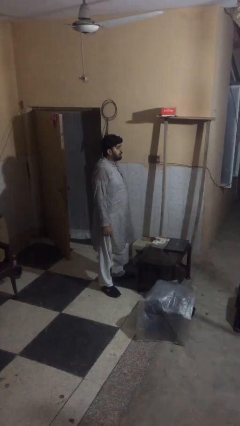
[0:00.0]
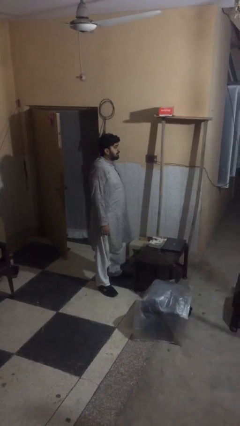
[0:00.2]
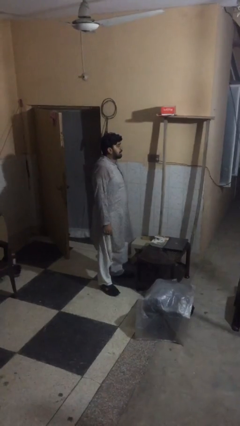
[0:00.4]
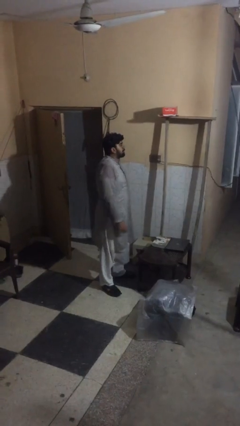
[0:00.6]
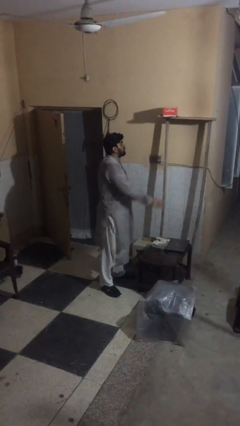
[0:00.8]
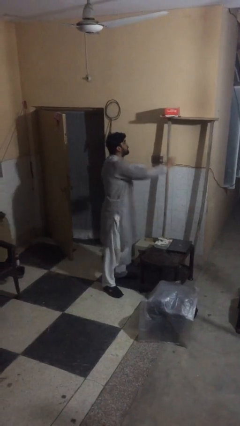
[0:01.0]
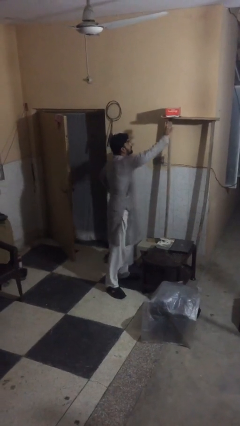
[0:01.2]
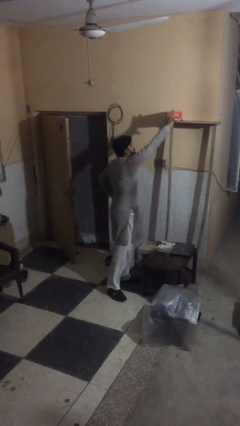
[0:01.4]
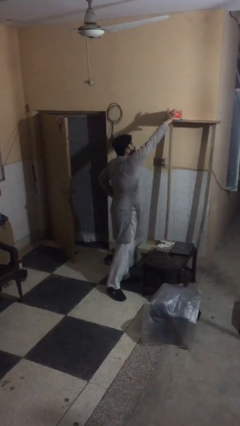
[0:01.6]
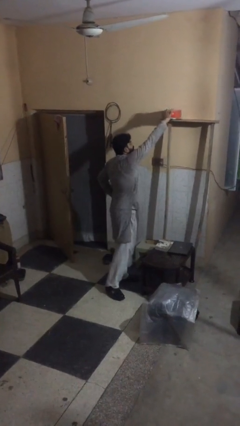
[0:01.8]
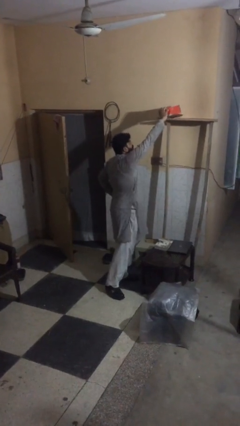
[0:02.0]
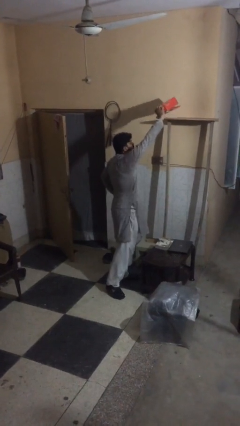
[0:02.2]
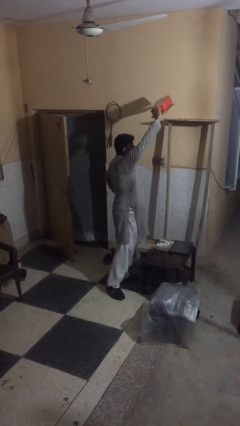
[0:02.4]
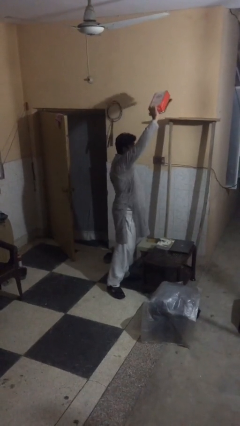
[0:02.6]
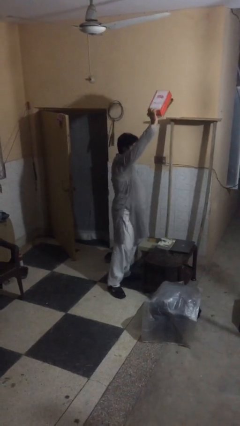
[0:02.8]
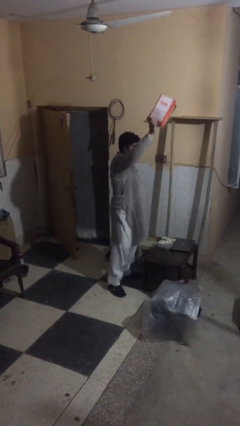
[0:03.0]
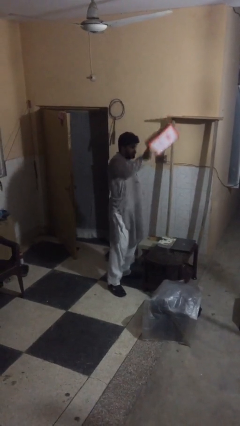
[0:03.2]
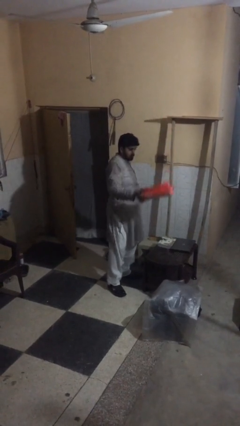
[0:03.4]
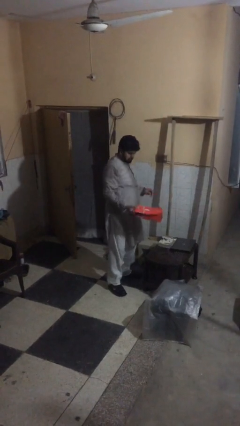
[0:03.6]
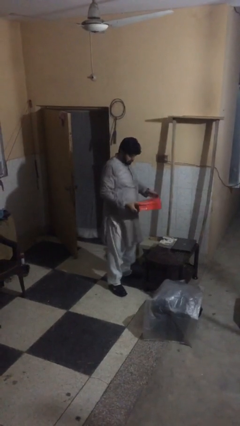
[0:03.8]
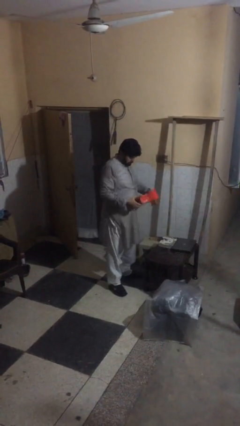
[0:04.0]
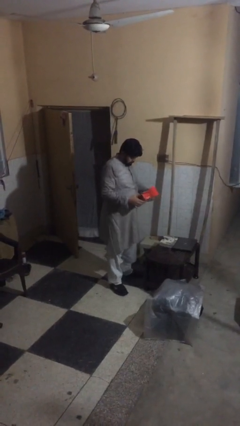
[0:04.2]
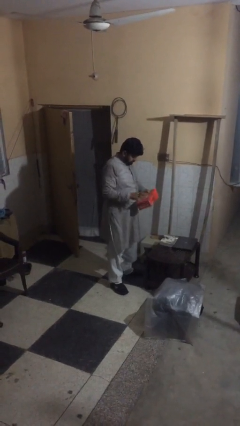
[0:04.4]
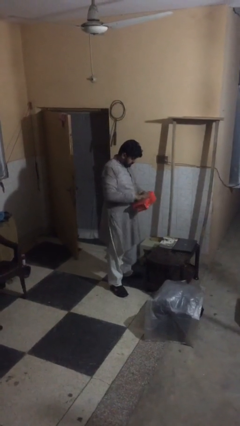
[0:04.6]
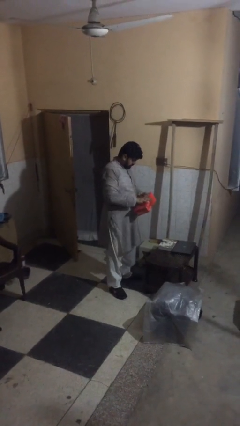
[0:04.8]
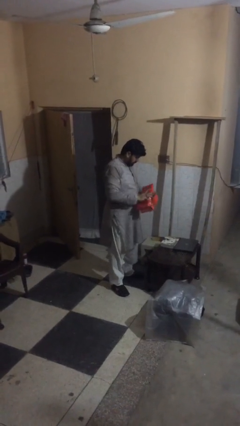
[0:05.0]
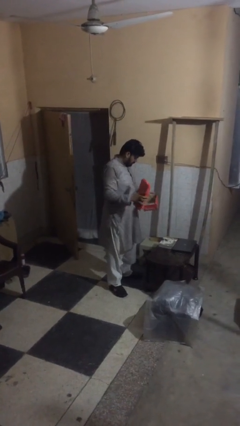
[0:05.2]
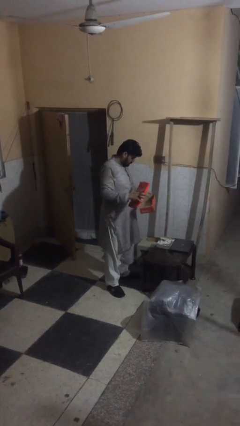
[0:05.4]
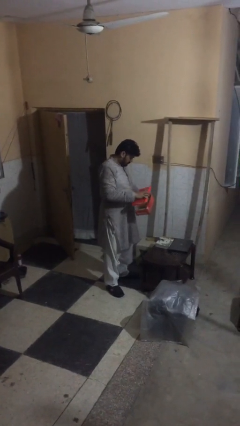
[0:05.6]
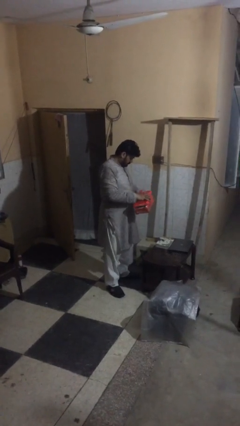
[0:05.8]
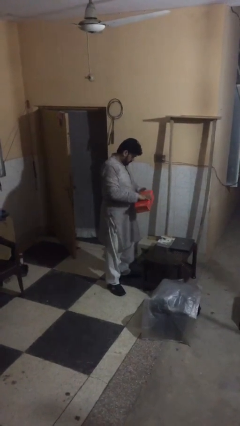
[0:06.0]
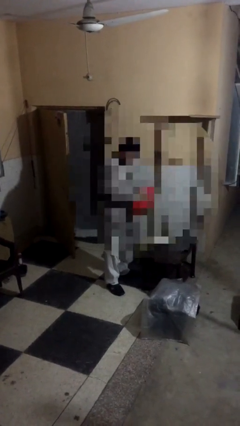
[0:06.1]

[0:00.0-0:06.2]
person picks up object from shelf

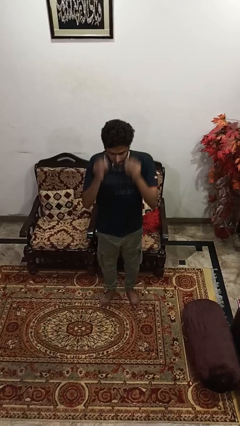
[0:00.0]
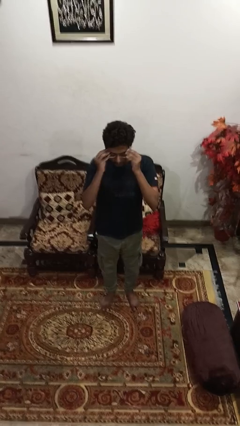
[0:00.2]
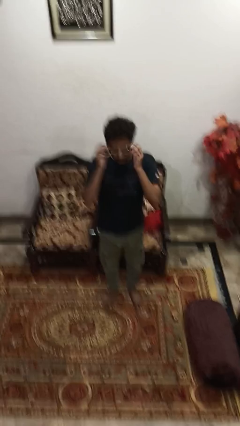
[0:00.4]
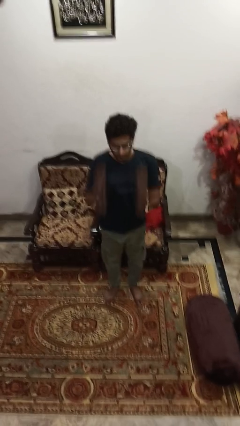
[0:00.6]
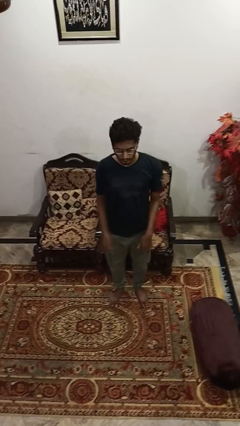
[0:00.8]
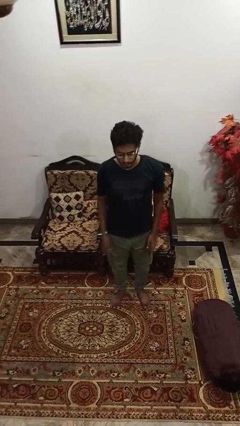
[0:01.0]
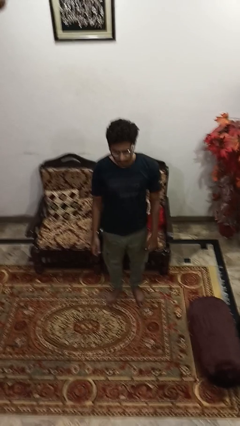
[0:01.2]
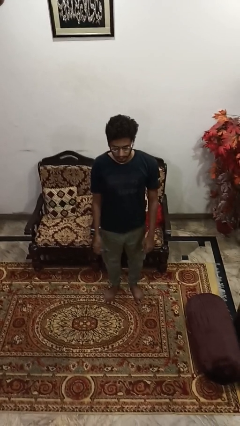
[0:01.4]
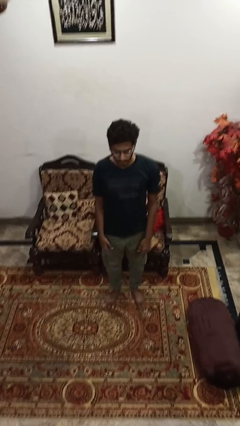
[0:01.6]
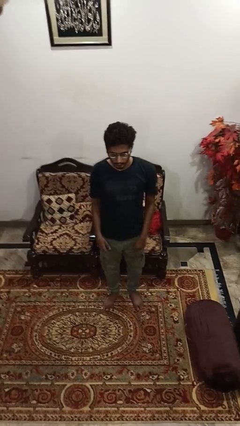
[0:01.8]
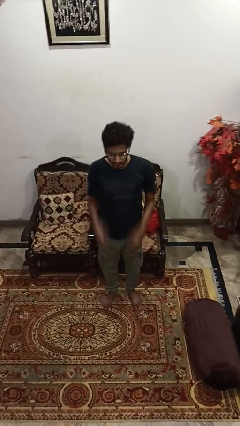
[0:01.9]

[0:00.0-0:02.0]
person puts on glasses

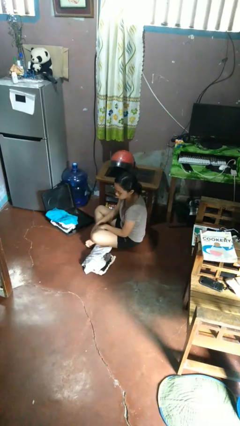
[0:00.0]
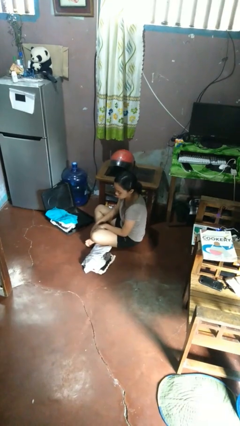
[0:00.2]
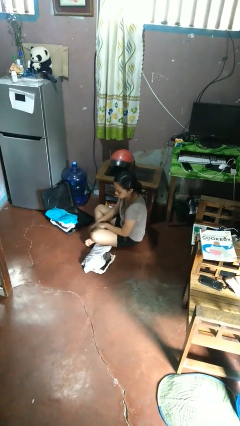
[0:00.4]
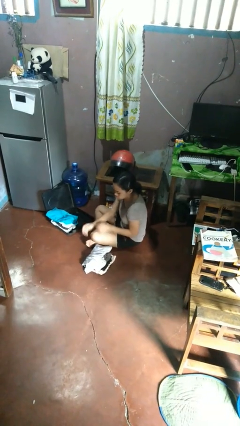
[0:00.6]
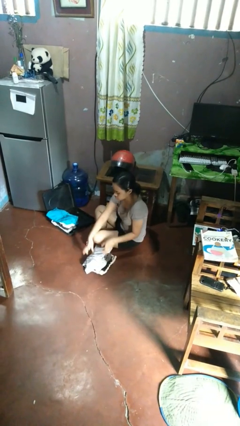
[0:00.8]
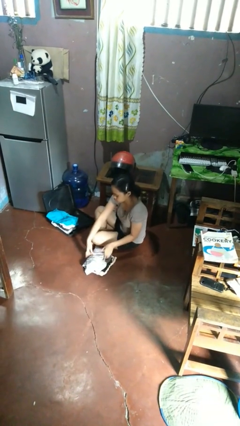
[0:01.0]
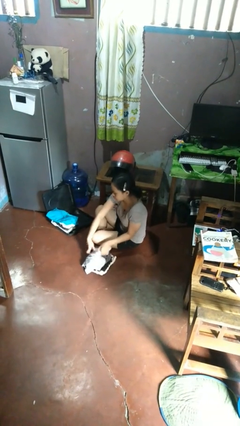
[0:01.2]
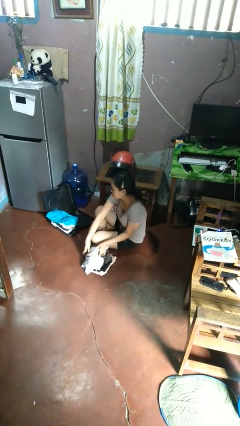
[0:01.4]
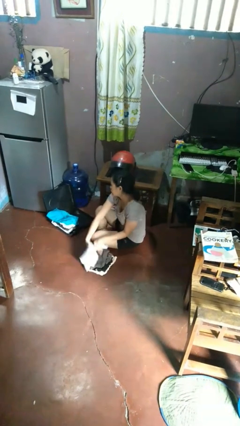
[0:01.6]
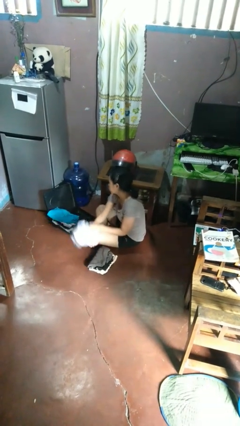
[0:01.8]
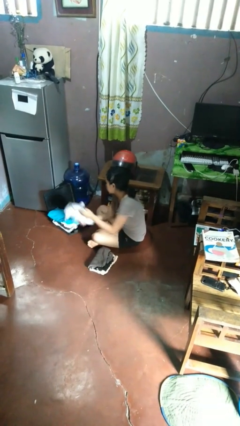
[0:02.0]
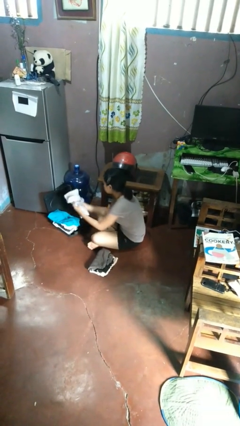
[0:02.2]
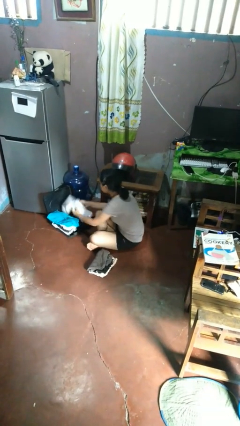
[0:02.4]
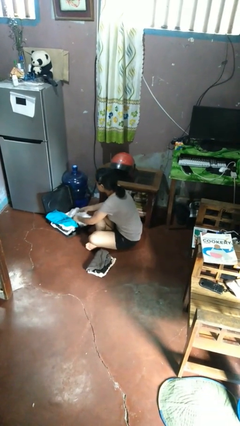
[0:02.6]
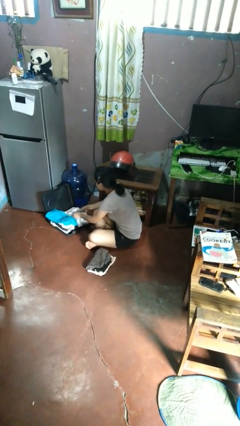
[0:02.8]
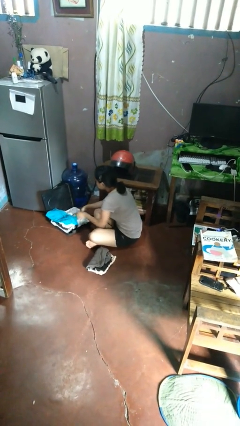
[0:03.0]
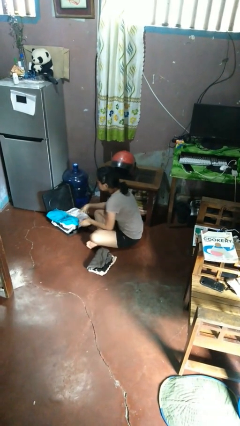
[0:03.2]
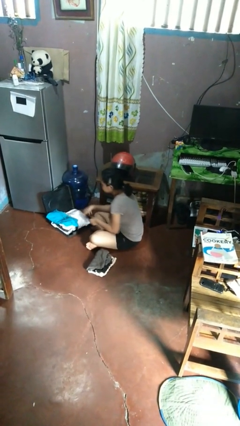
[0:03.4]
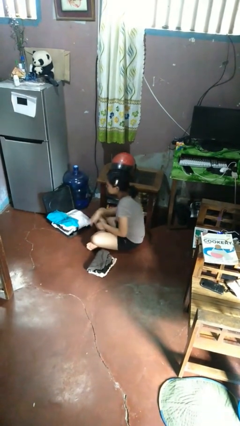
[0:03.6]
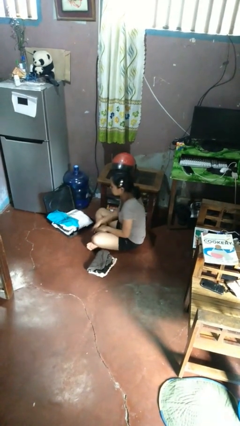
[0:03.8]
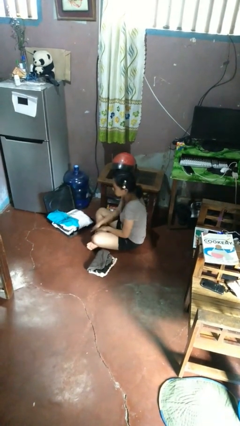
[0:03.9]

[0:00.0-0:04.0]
person loads clothes into suitcase

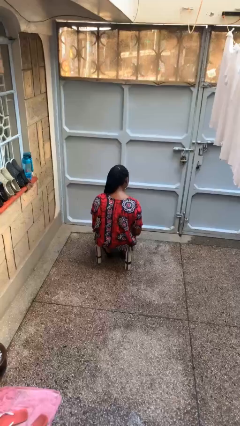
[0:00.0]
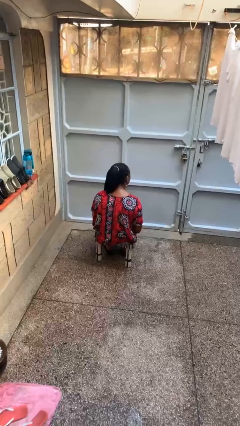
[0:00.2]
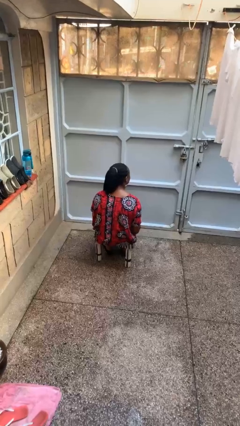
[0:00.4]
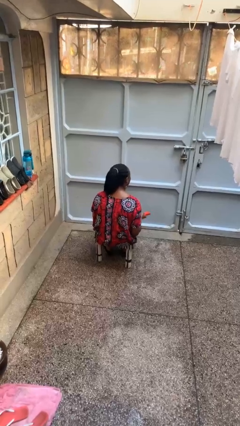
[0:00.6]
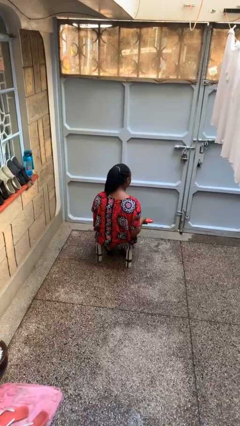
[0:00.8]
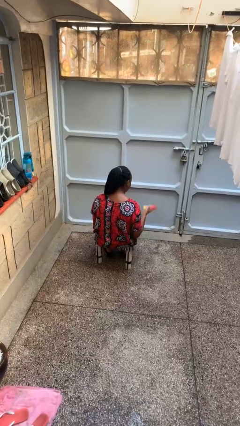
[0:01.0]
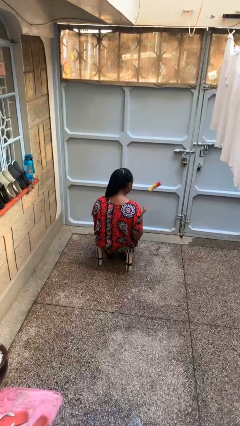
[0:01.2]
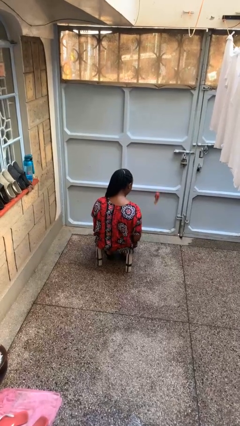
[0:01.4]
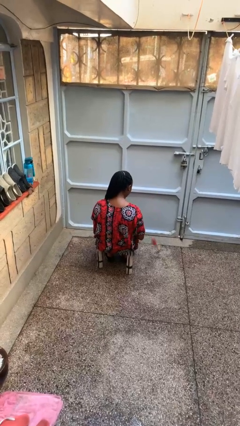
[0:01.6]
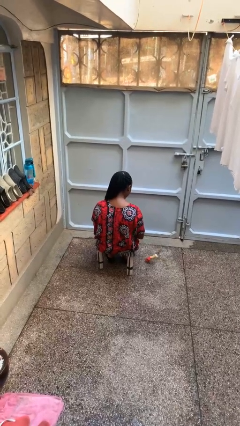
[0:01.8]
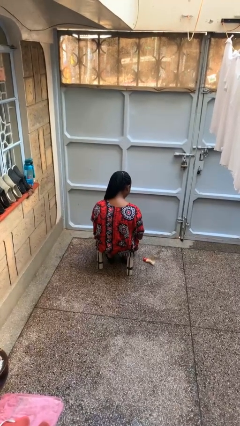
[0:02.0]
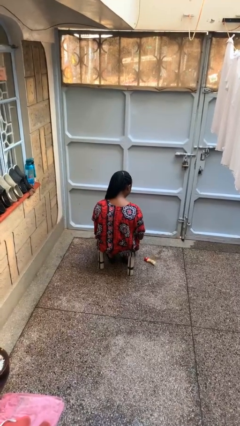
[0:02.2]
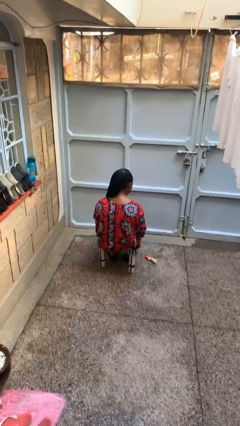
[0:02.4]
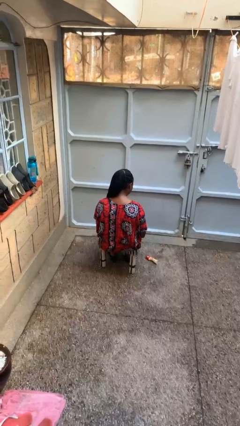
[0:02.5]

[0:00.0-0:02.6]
person throws object into air

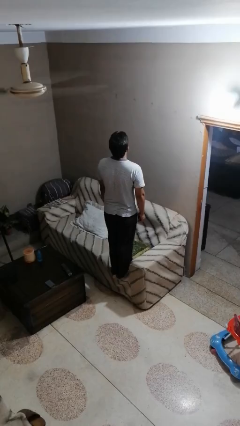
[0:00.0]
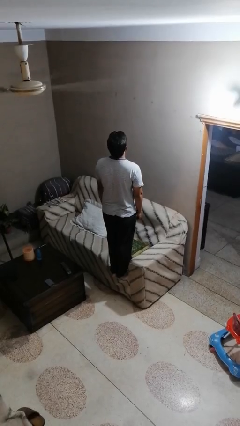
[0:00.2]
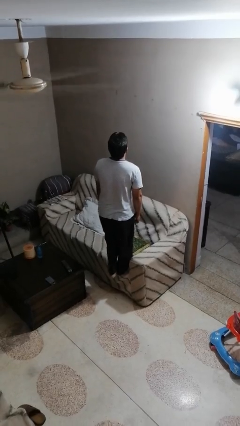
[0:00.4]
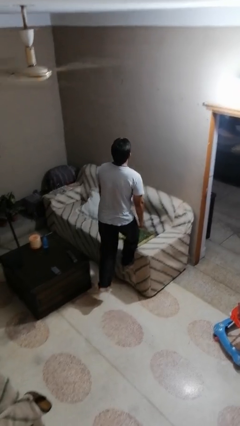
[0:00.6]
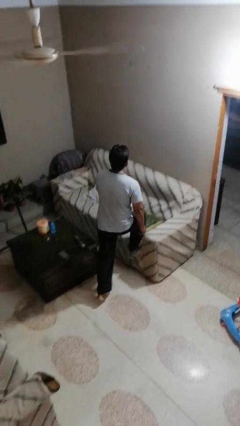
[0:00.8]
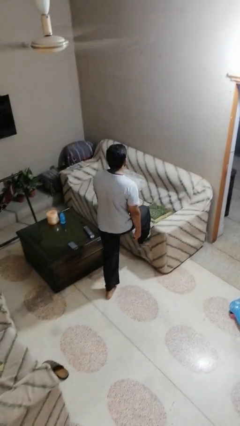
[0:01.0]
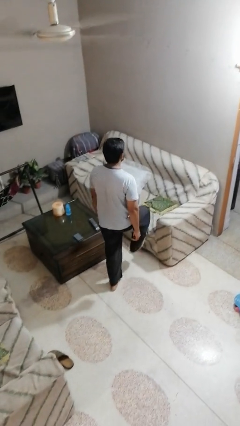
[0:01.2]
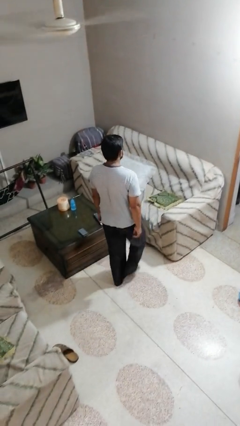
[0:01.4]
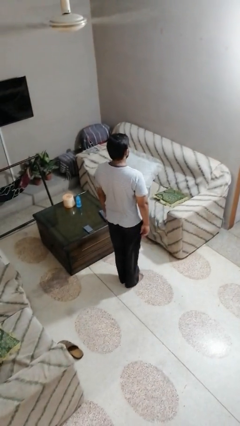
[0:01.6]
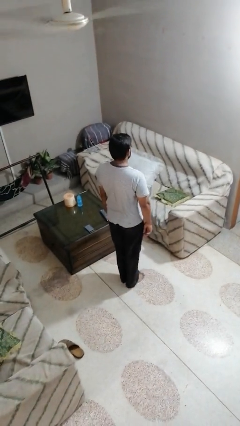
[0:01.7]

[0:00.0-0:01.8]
person climbs off couch

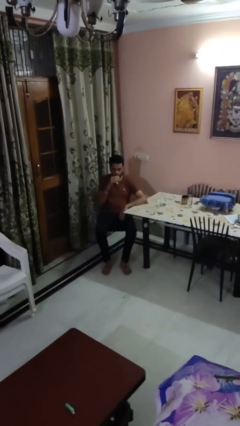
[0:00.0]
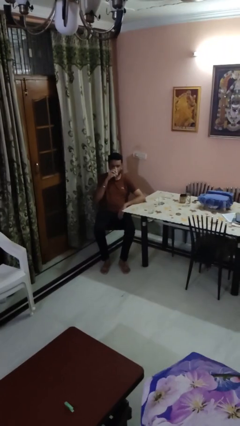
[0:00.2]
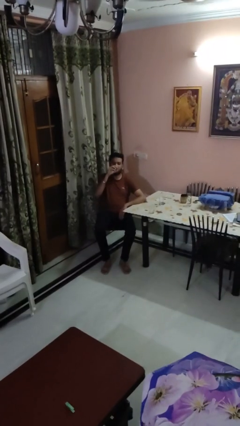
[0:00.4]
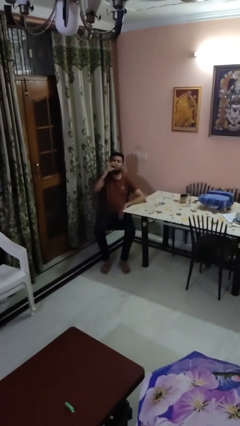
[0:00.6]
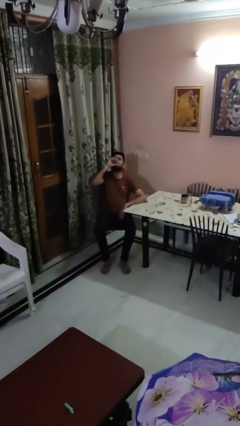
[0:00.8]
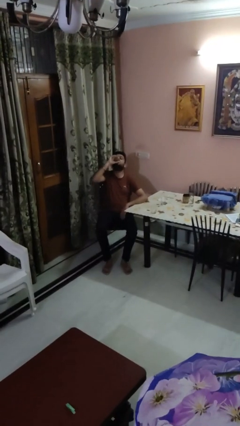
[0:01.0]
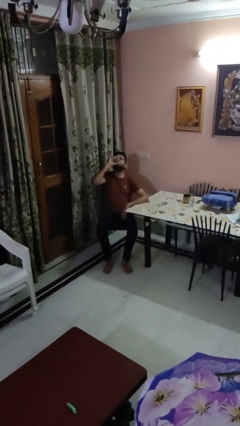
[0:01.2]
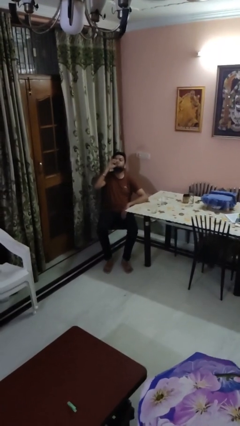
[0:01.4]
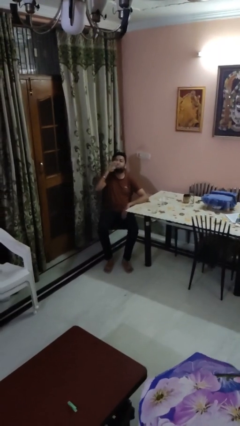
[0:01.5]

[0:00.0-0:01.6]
person drinks from shotglass
